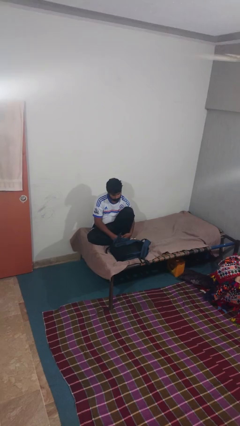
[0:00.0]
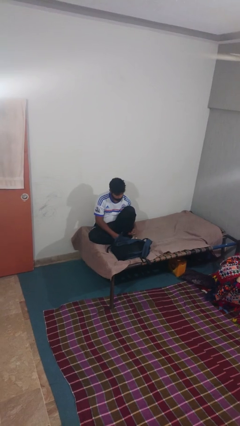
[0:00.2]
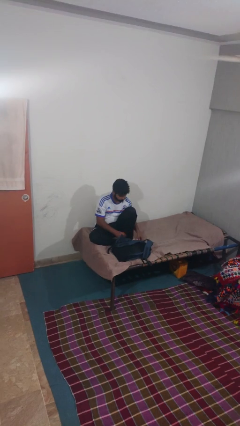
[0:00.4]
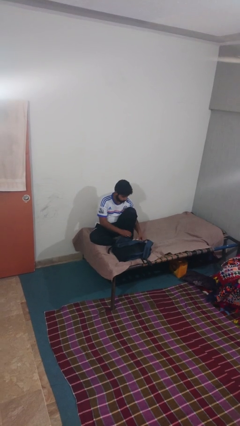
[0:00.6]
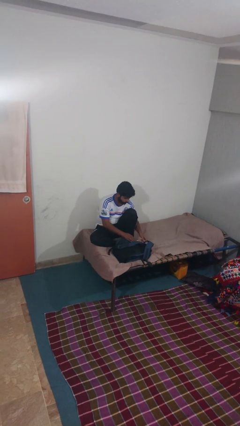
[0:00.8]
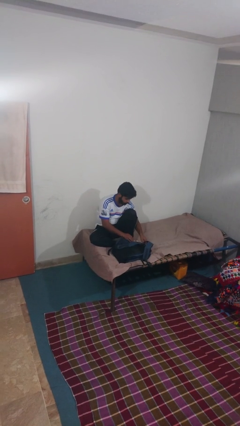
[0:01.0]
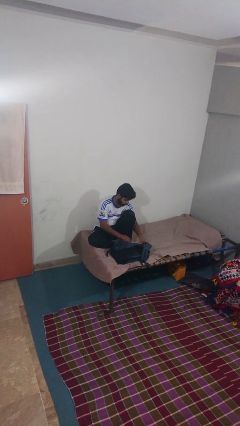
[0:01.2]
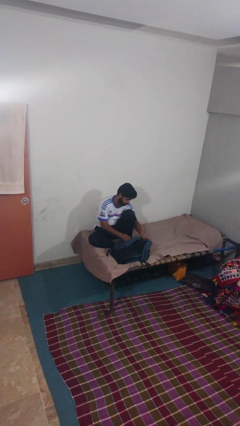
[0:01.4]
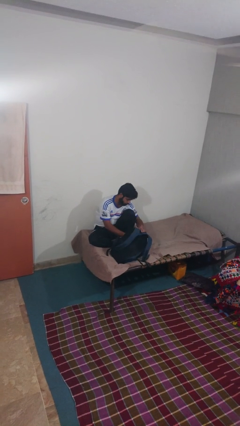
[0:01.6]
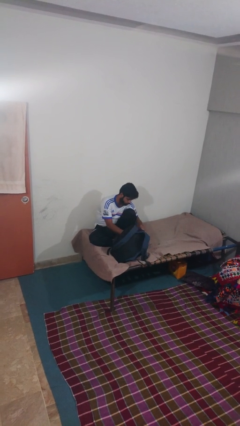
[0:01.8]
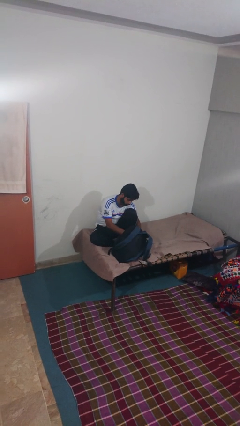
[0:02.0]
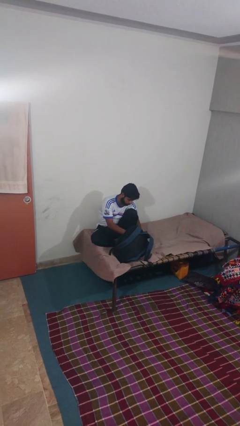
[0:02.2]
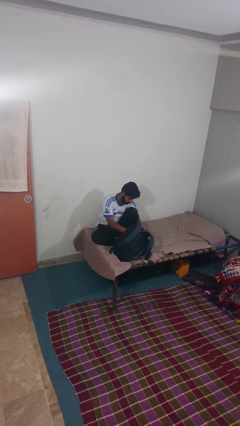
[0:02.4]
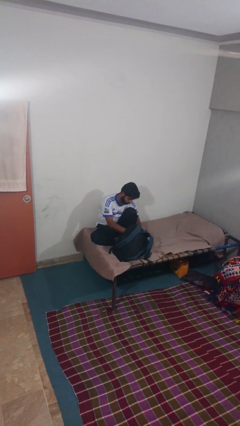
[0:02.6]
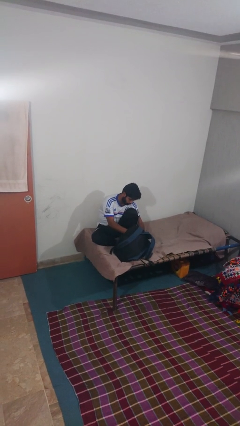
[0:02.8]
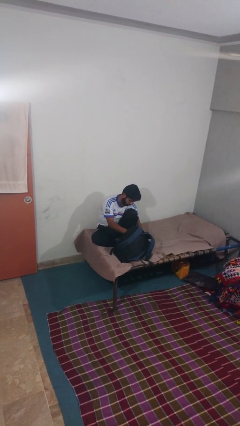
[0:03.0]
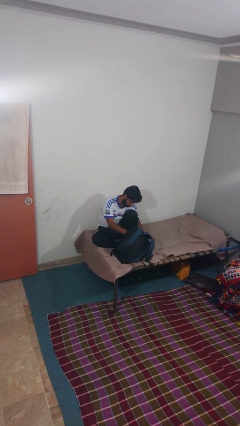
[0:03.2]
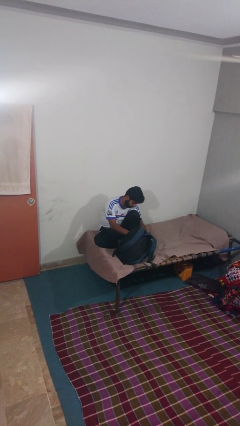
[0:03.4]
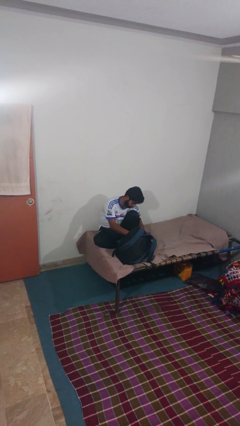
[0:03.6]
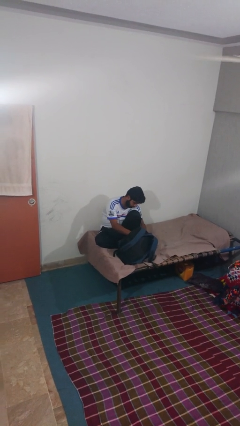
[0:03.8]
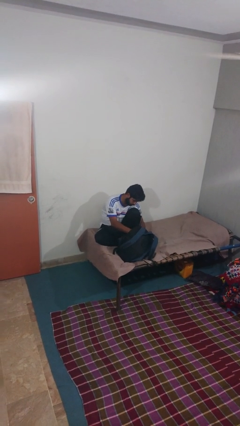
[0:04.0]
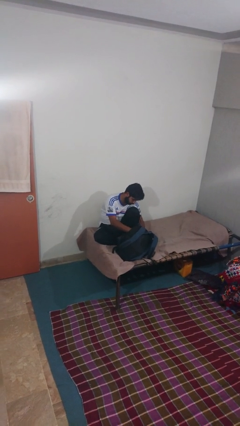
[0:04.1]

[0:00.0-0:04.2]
person searches in backpack

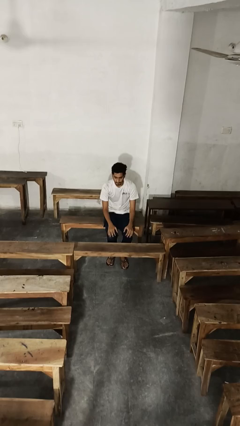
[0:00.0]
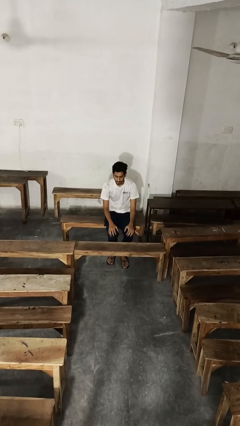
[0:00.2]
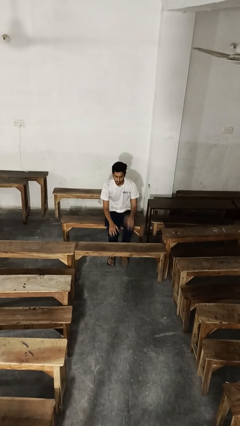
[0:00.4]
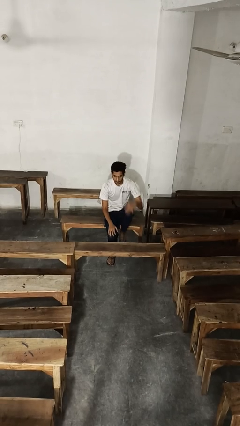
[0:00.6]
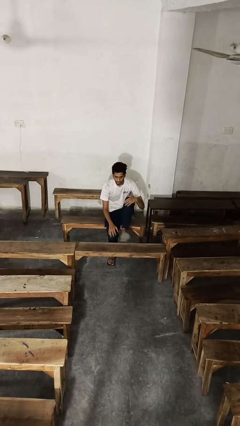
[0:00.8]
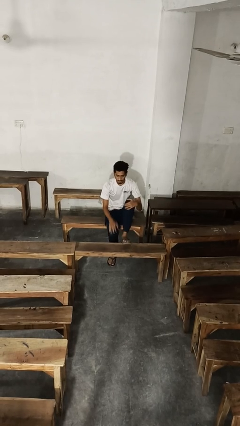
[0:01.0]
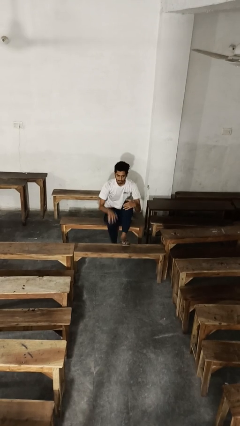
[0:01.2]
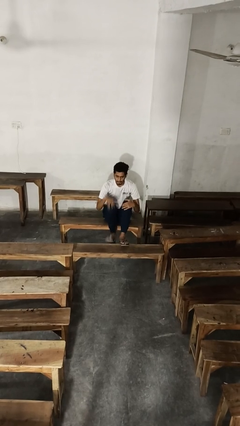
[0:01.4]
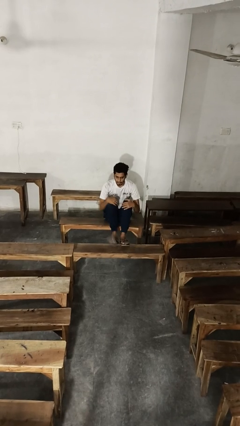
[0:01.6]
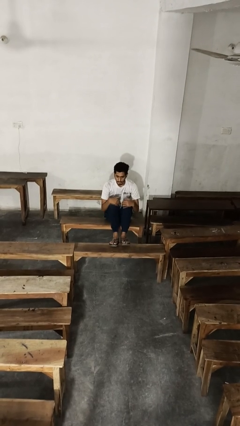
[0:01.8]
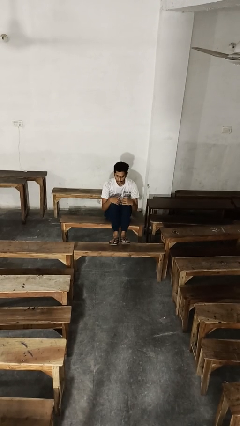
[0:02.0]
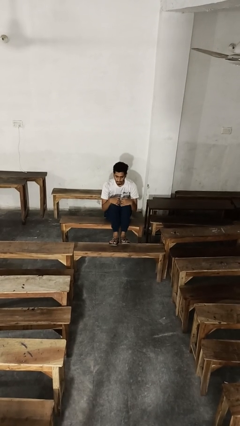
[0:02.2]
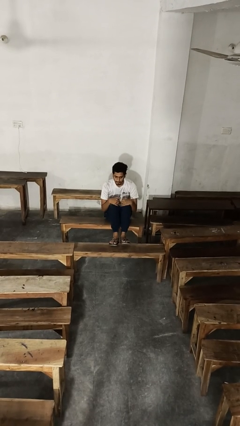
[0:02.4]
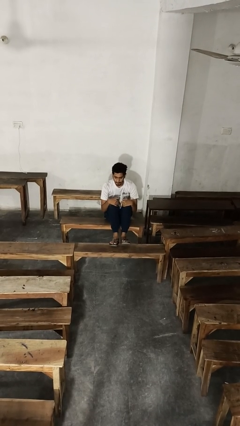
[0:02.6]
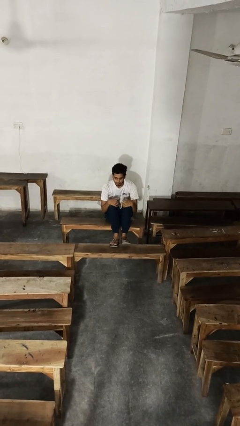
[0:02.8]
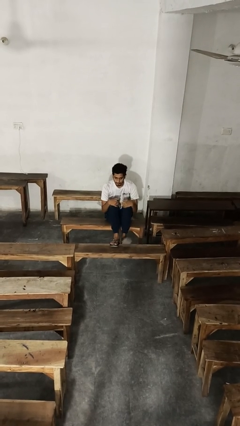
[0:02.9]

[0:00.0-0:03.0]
person puts feet up

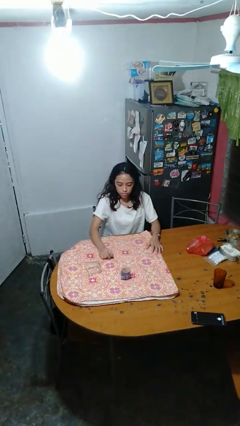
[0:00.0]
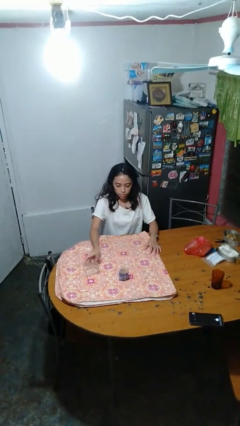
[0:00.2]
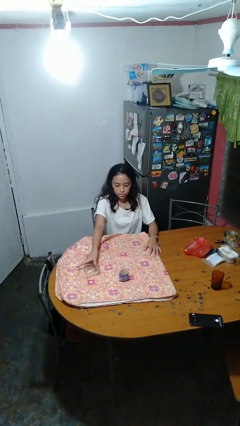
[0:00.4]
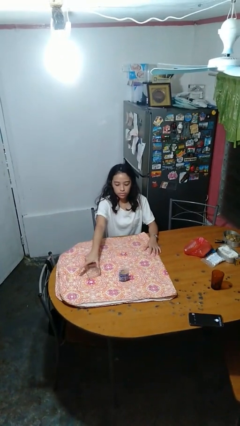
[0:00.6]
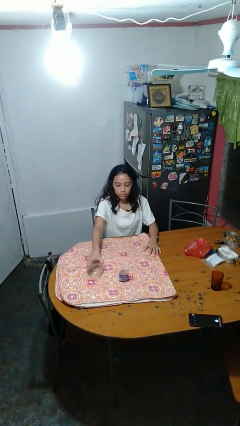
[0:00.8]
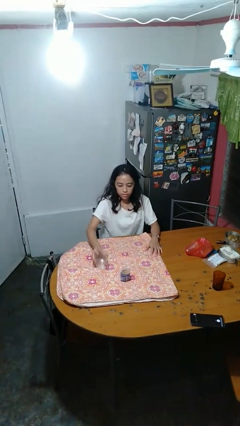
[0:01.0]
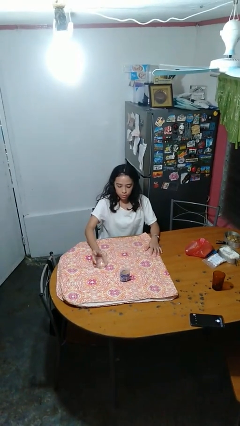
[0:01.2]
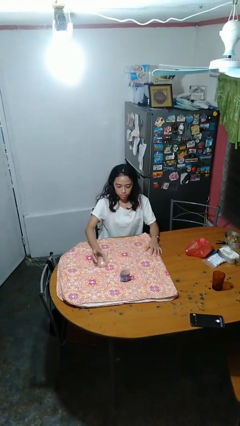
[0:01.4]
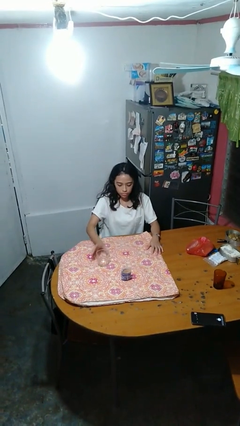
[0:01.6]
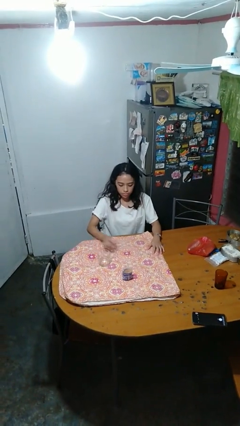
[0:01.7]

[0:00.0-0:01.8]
person sets upright glass

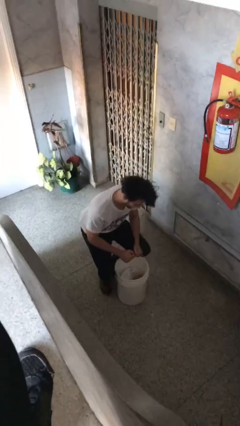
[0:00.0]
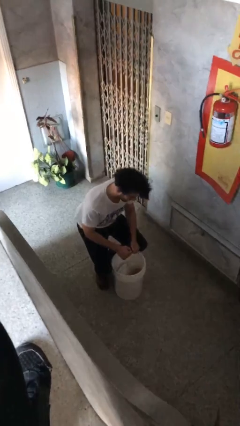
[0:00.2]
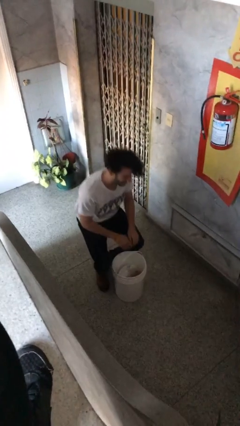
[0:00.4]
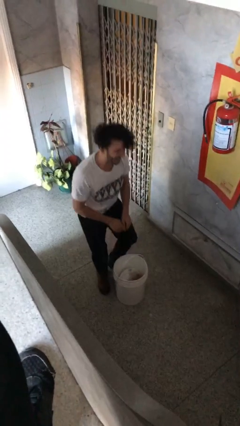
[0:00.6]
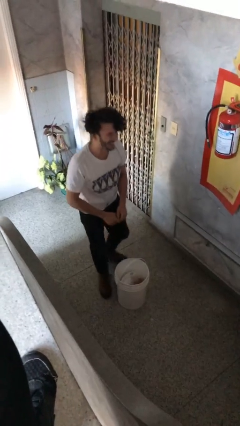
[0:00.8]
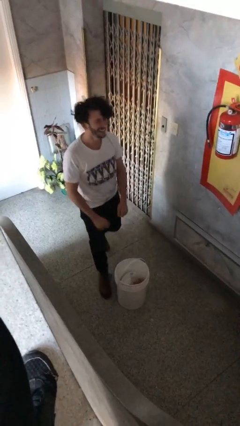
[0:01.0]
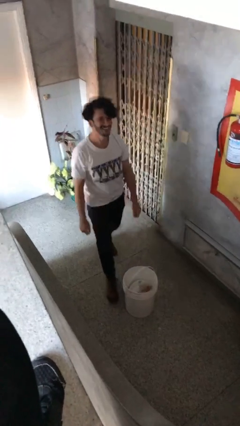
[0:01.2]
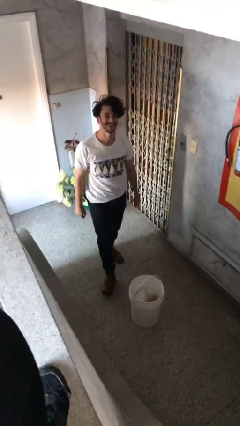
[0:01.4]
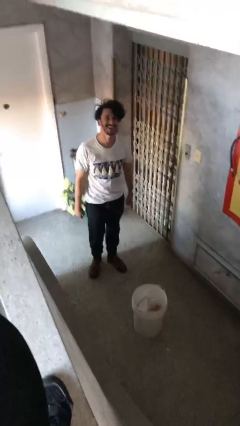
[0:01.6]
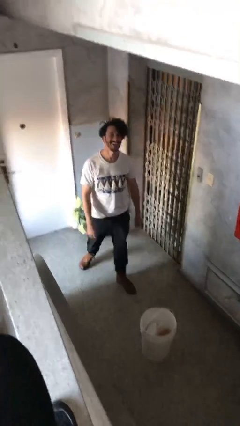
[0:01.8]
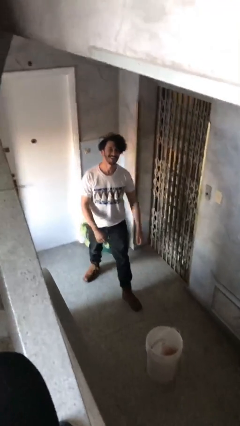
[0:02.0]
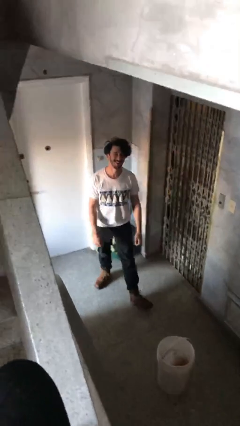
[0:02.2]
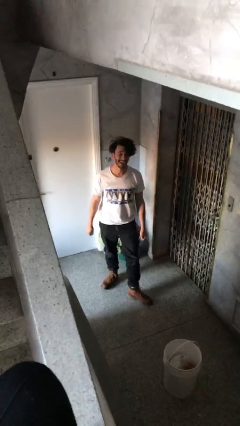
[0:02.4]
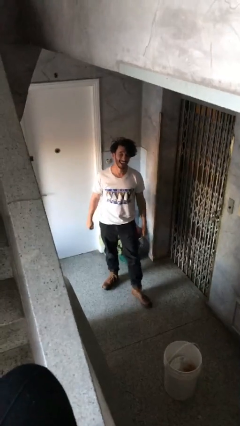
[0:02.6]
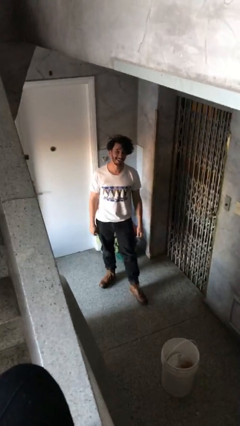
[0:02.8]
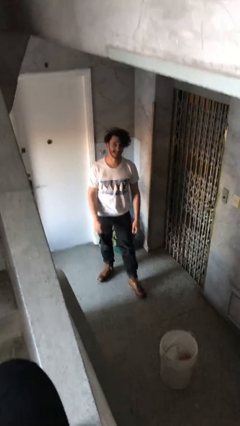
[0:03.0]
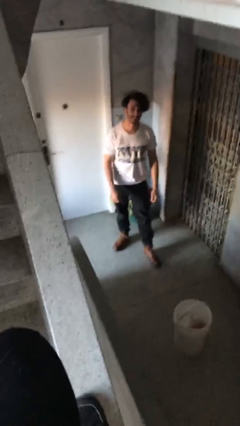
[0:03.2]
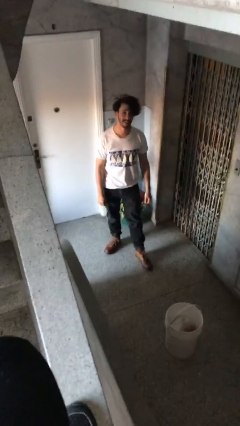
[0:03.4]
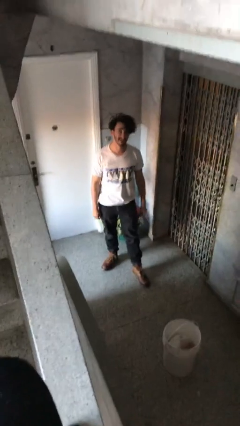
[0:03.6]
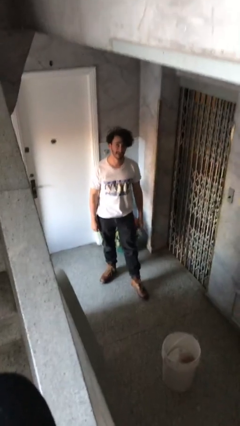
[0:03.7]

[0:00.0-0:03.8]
person puts down object on floor

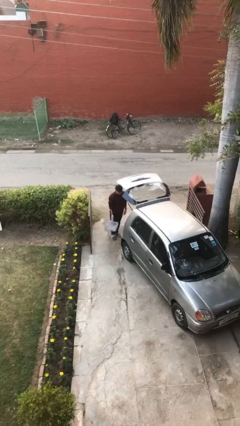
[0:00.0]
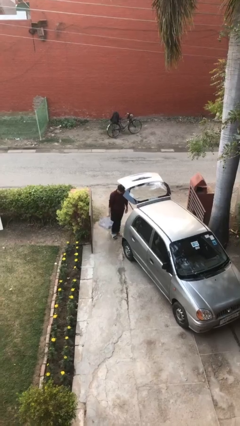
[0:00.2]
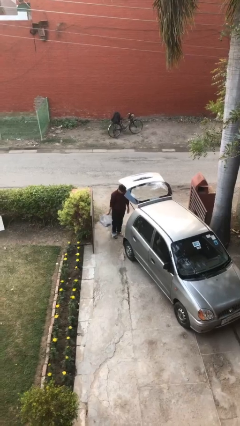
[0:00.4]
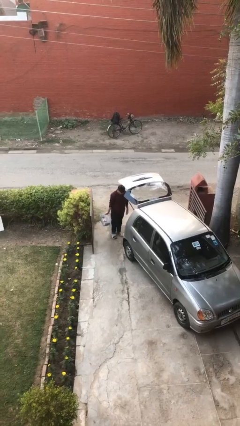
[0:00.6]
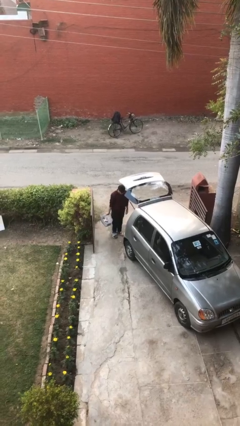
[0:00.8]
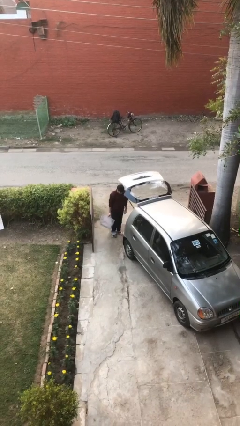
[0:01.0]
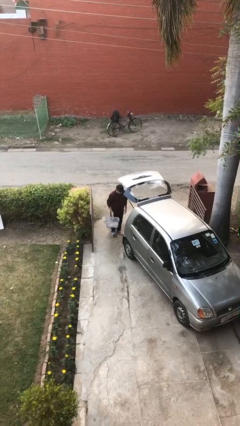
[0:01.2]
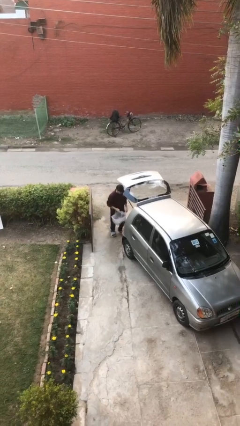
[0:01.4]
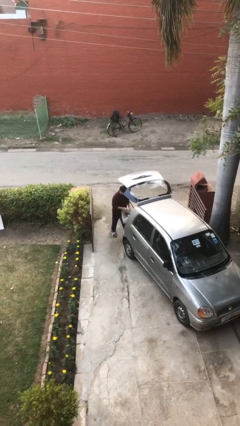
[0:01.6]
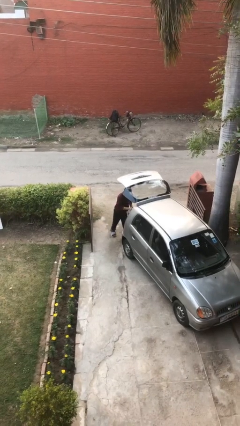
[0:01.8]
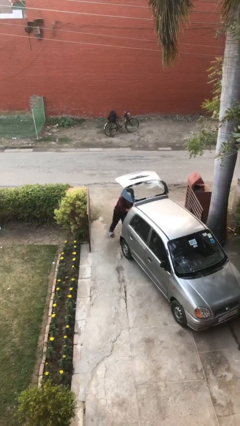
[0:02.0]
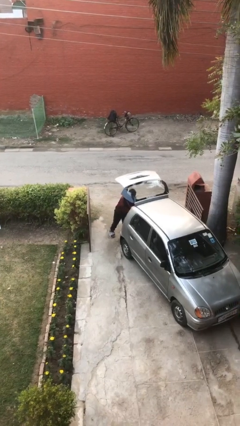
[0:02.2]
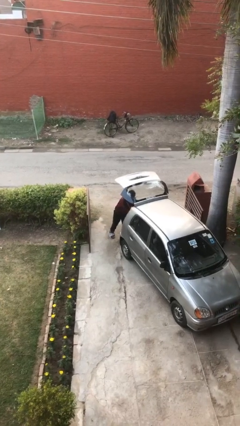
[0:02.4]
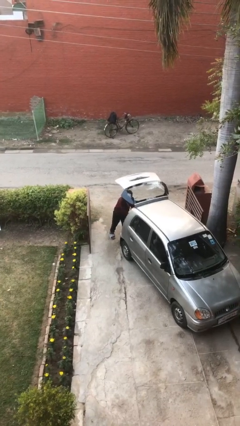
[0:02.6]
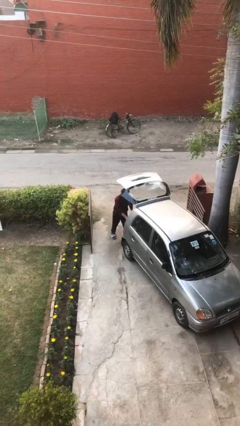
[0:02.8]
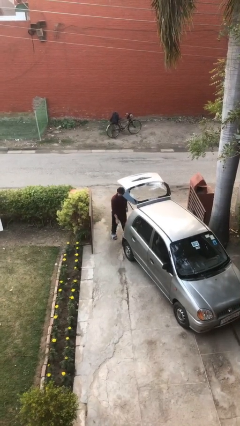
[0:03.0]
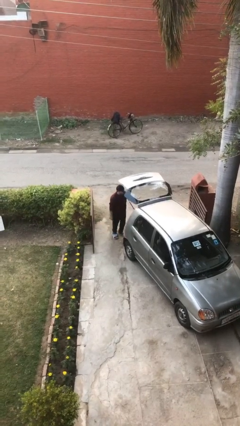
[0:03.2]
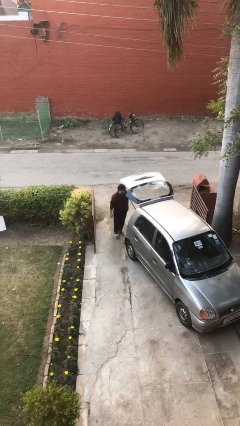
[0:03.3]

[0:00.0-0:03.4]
person loads car

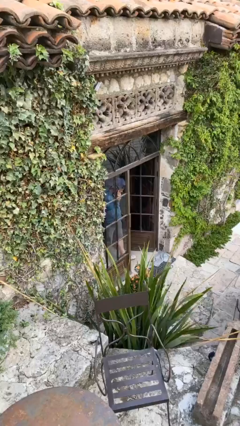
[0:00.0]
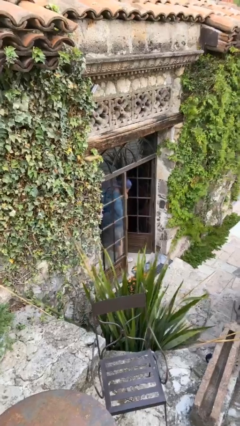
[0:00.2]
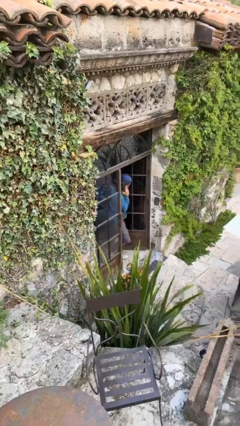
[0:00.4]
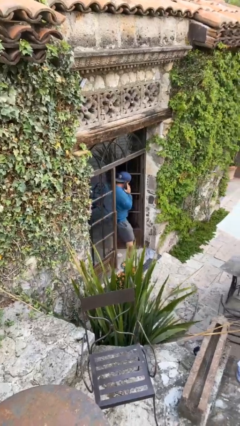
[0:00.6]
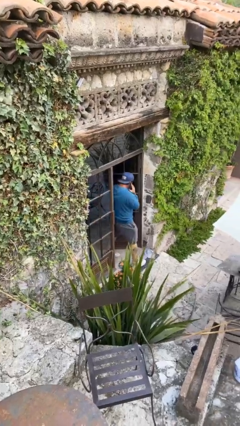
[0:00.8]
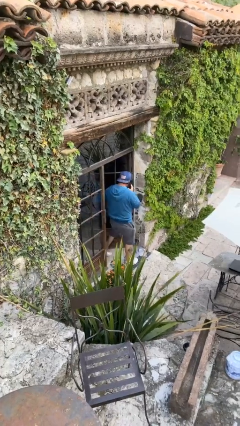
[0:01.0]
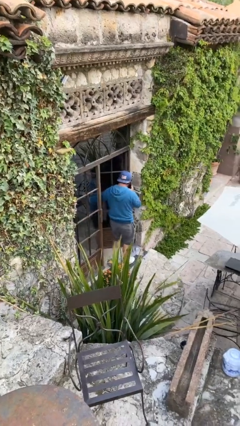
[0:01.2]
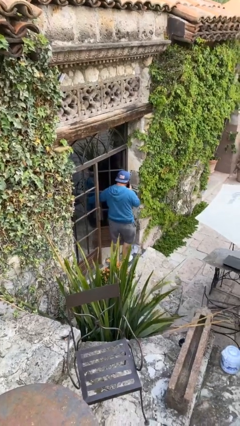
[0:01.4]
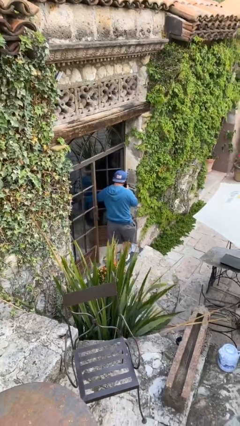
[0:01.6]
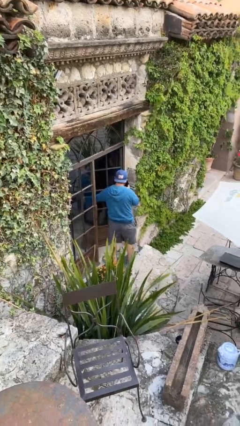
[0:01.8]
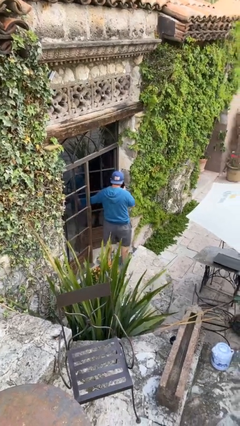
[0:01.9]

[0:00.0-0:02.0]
person enters scene through structure
